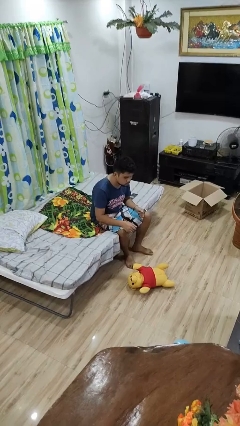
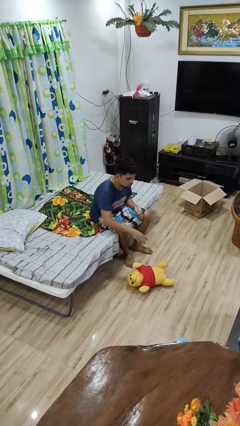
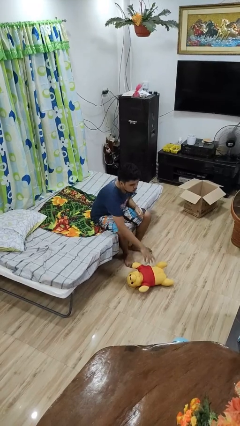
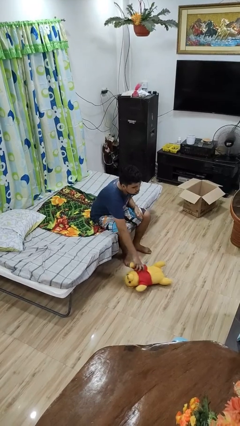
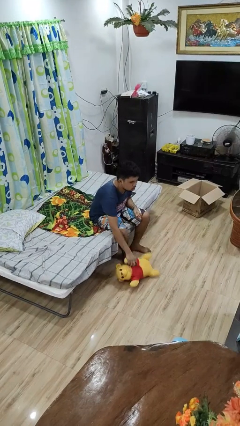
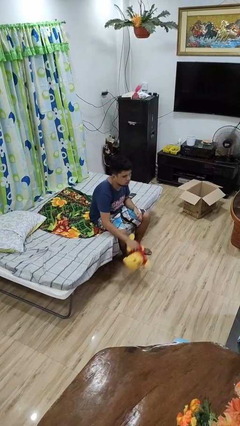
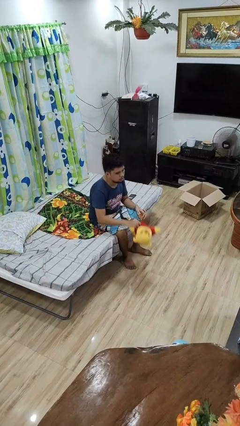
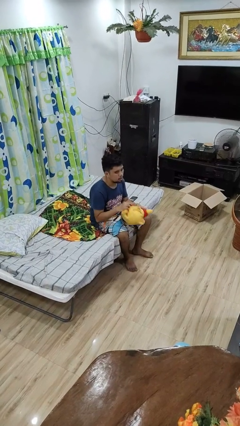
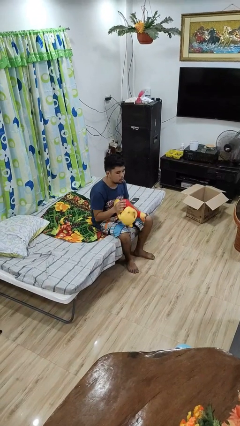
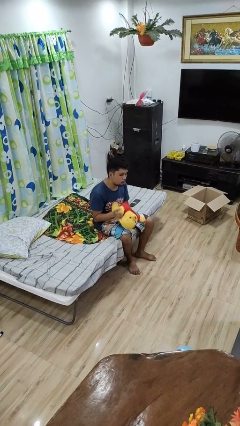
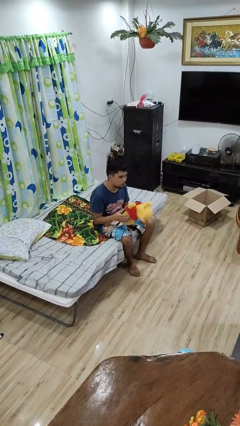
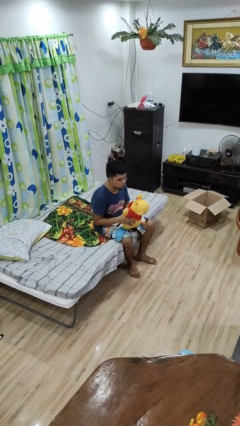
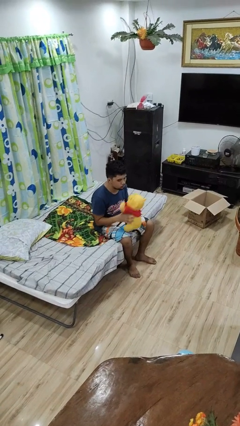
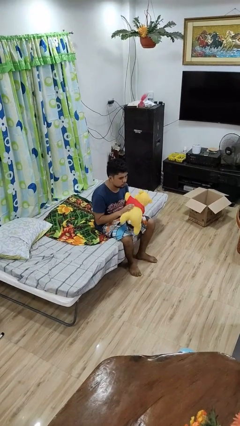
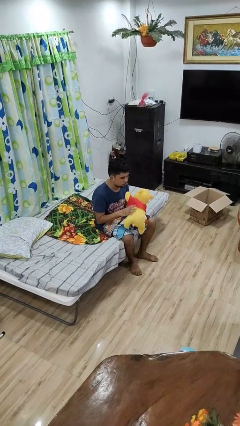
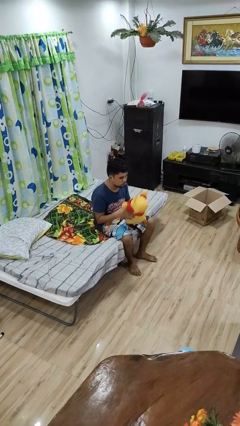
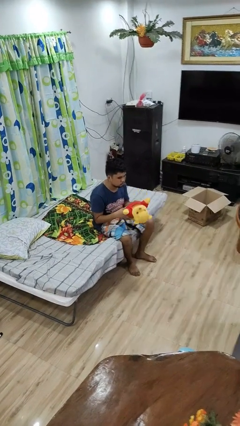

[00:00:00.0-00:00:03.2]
person picks up object from floor

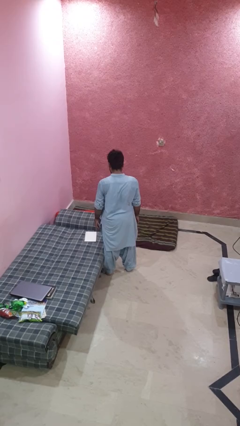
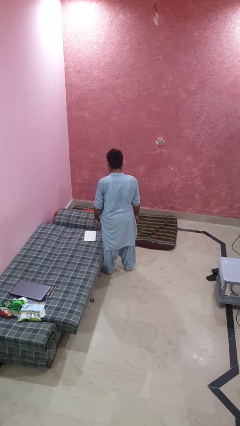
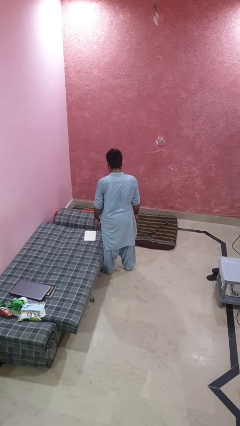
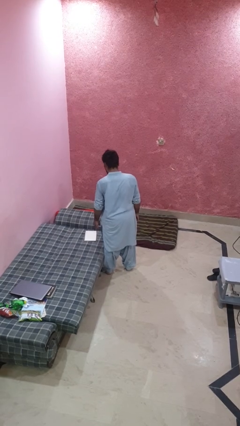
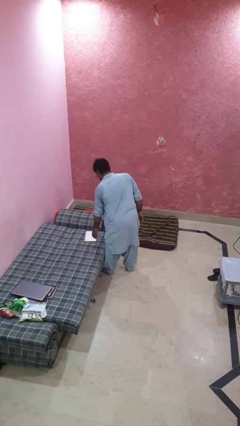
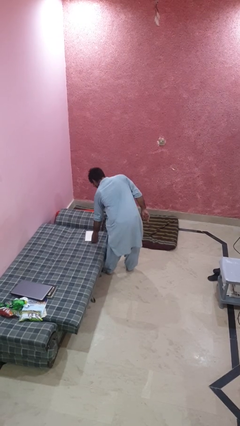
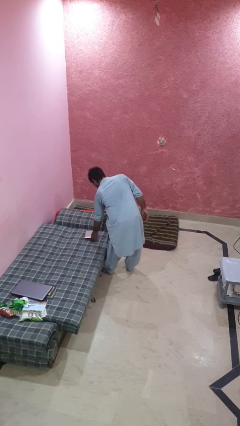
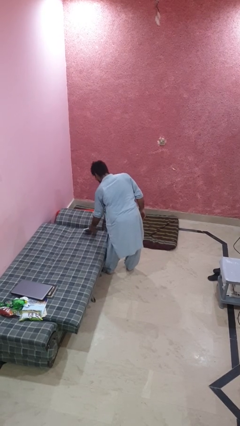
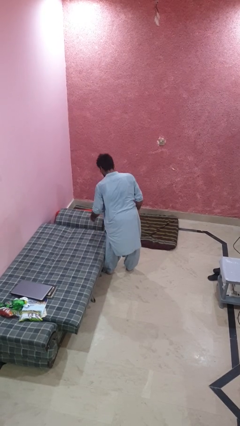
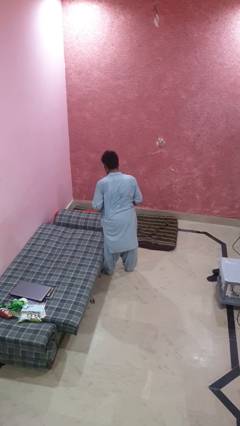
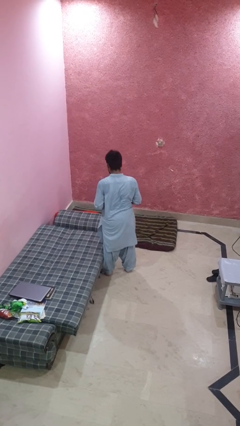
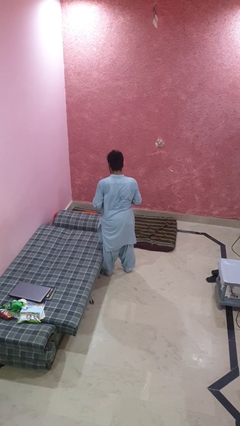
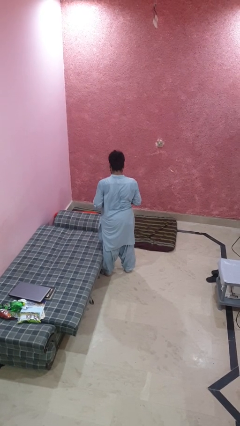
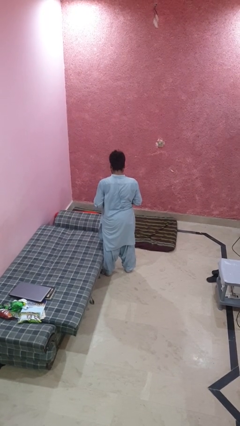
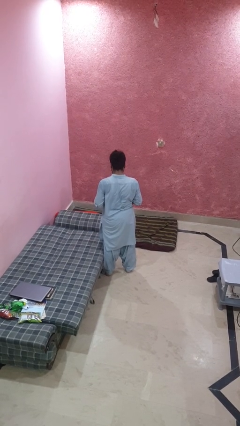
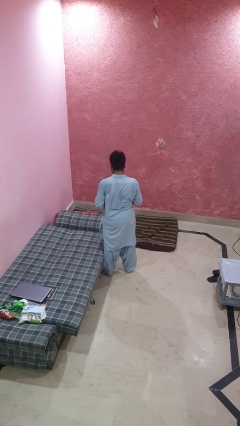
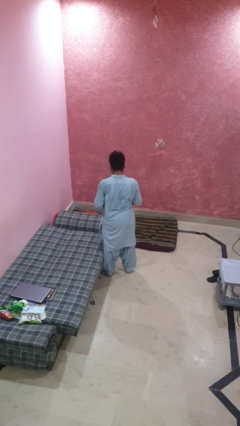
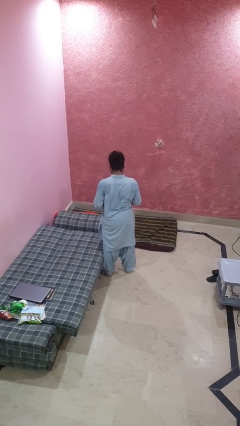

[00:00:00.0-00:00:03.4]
person picks up object from bed

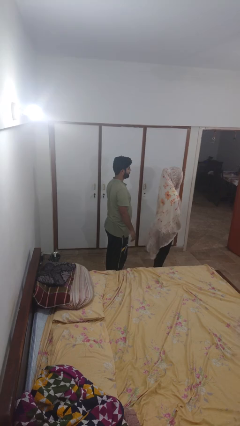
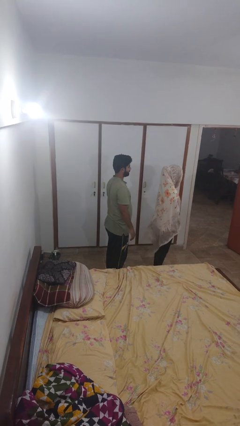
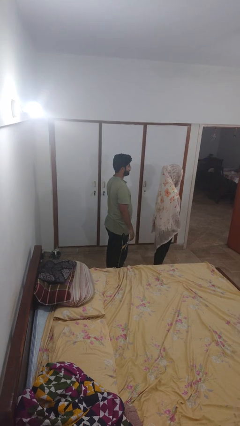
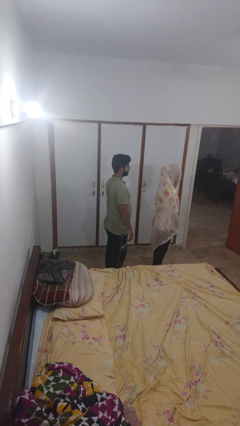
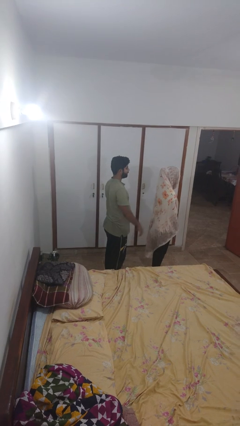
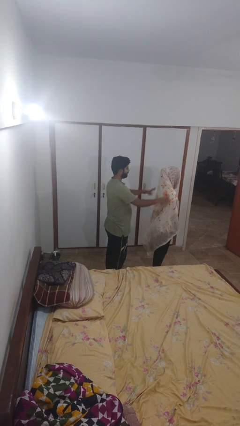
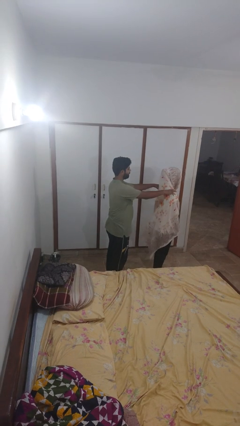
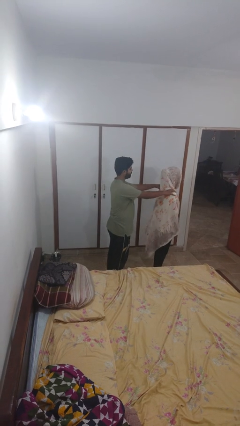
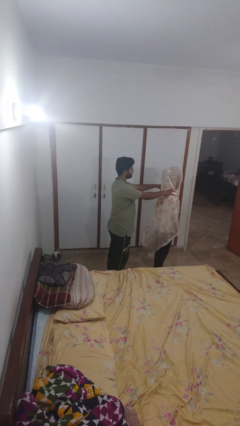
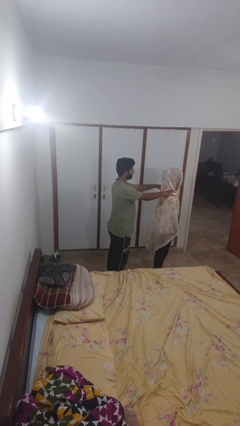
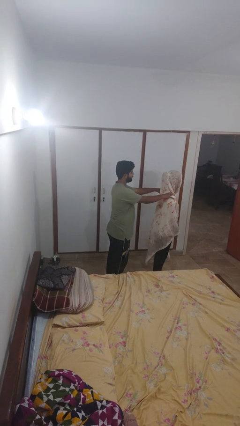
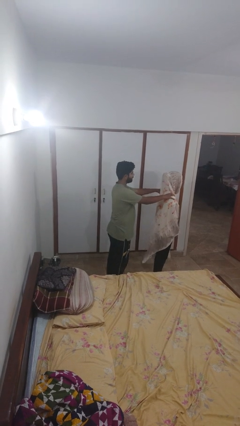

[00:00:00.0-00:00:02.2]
person grabs person by shoulder

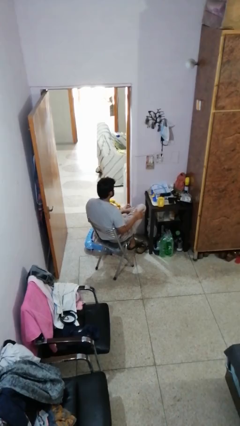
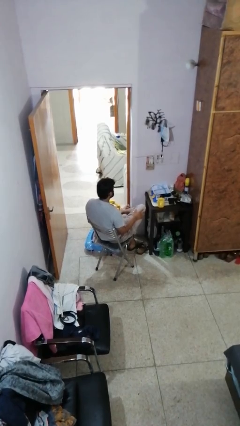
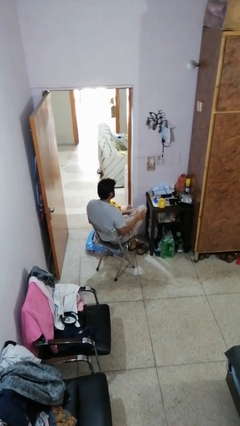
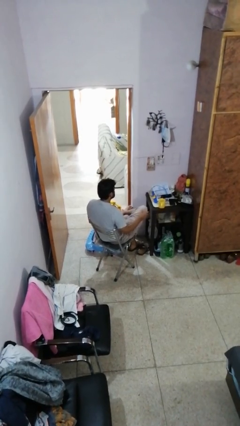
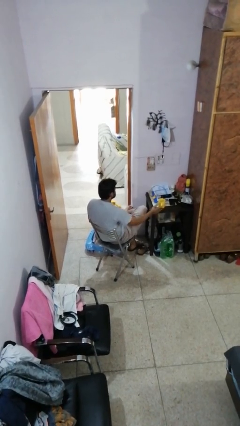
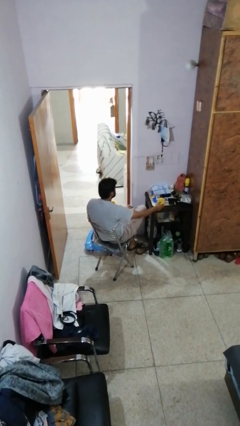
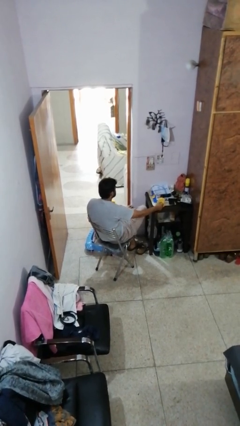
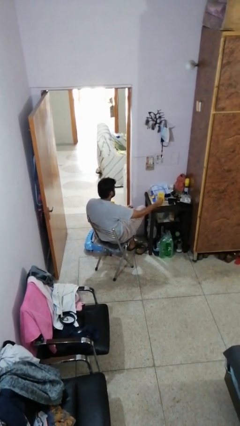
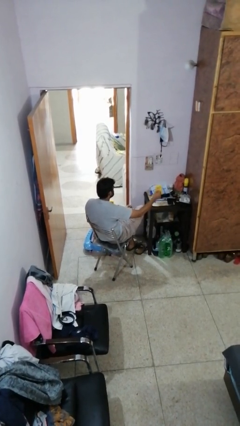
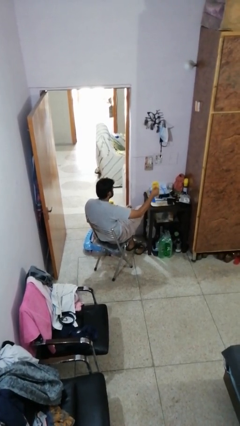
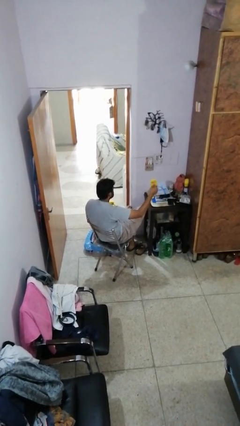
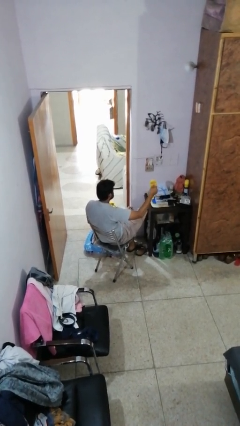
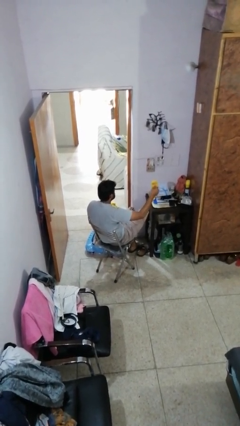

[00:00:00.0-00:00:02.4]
person picks up object from table

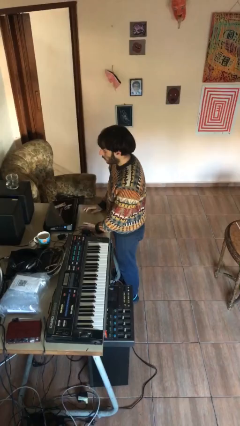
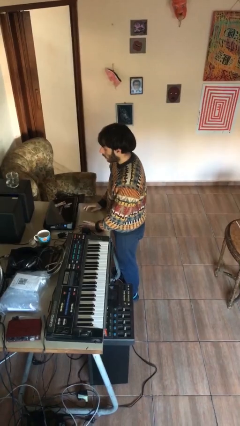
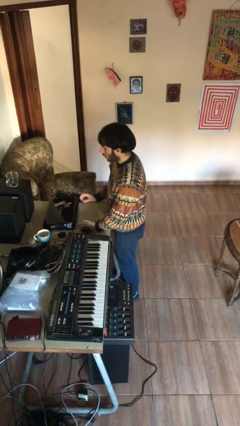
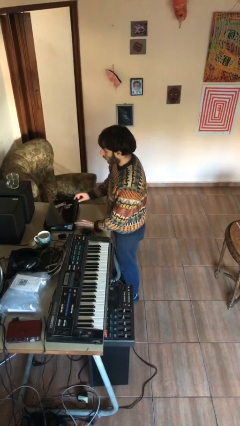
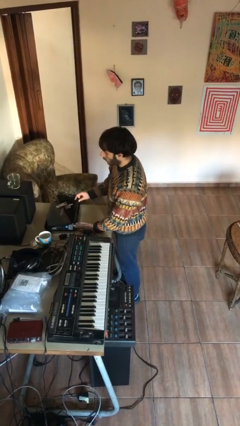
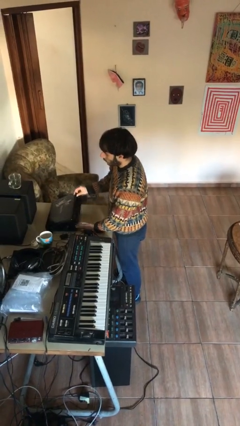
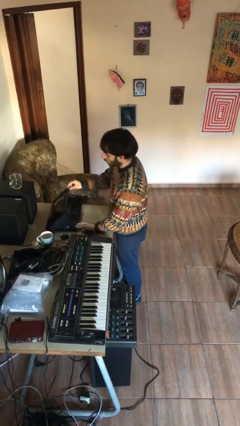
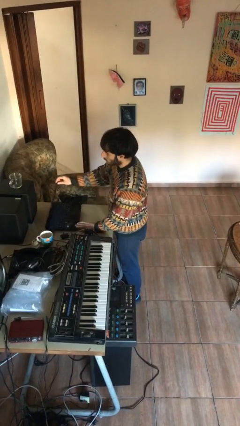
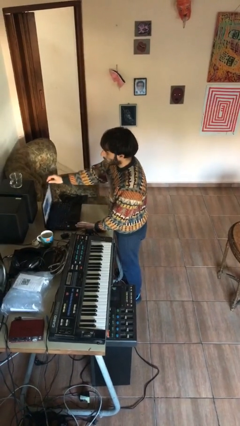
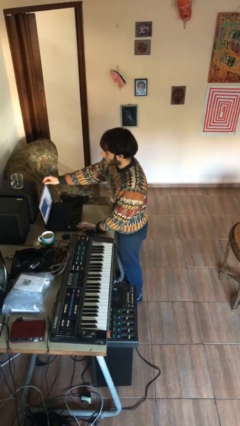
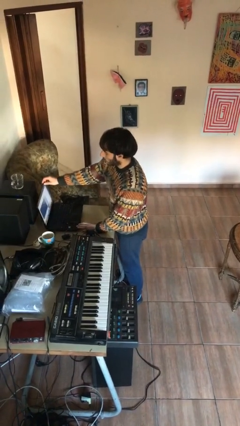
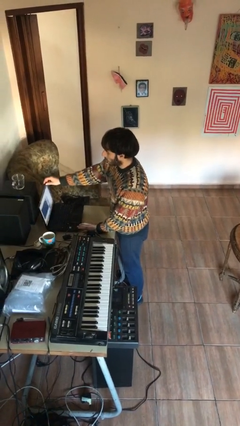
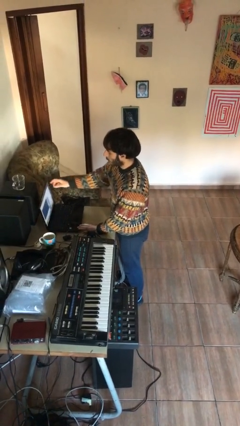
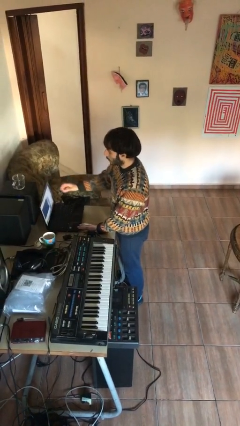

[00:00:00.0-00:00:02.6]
person opens laptop

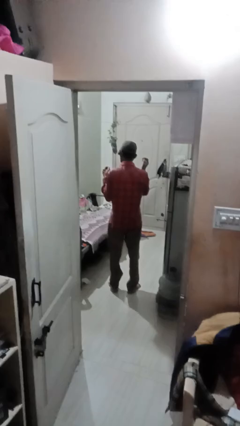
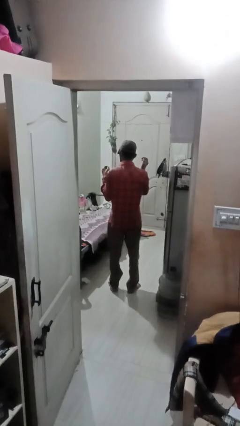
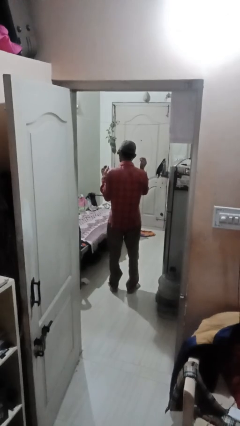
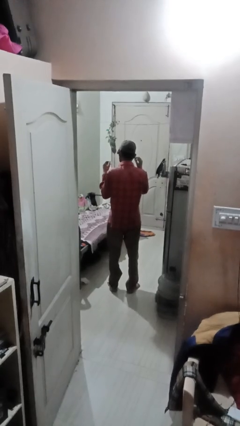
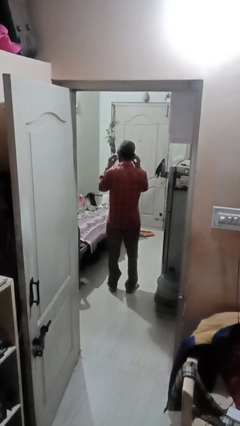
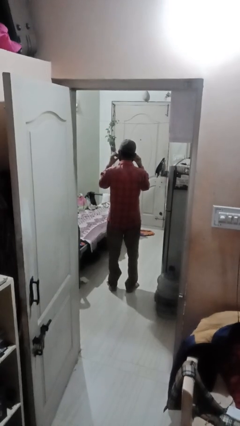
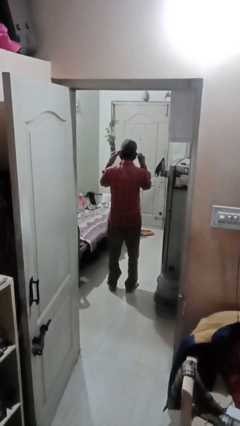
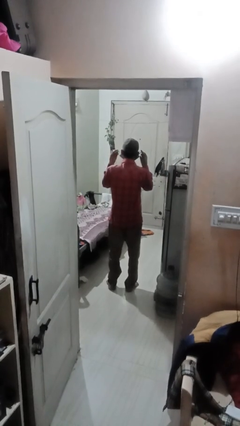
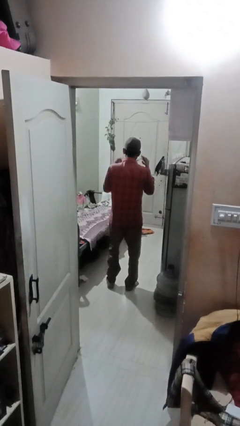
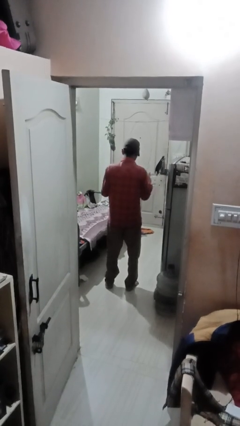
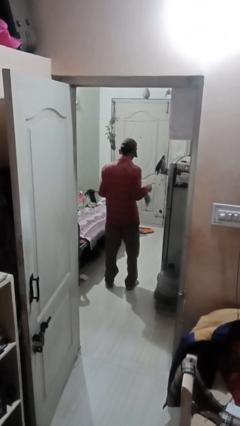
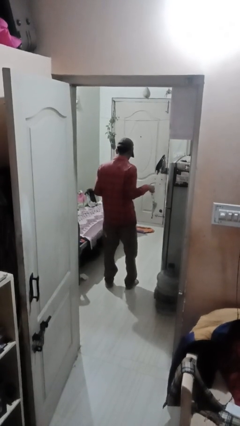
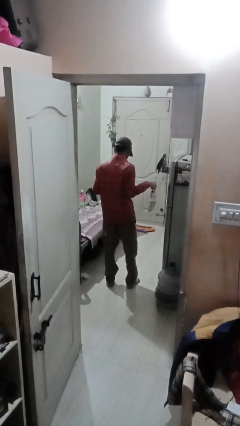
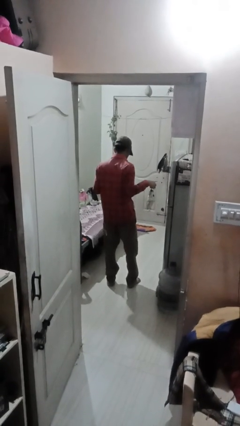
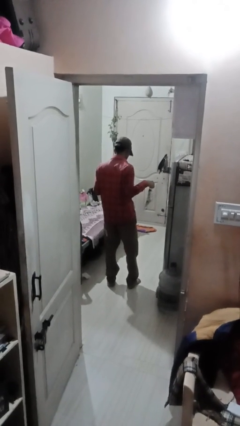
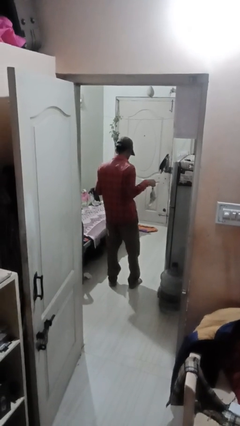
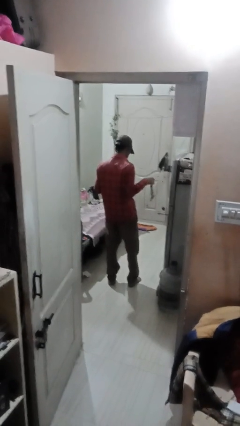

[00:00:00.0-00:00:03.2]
person takes off facemask

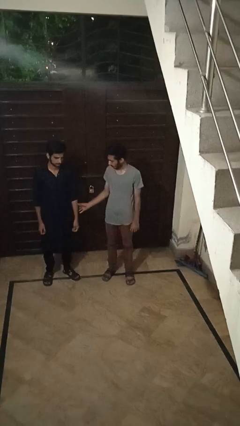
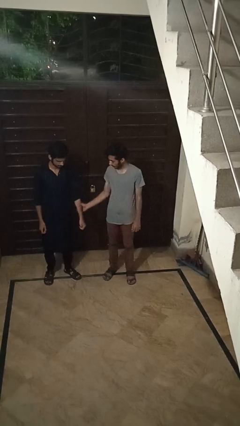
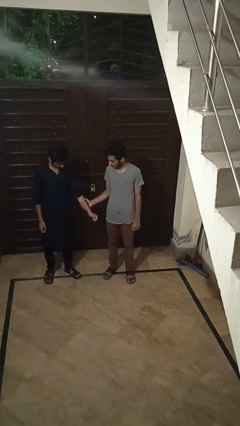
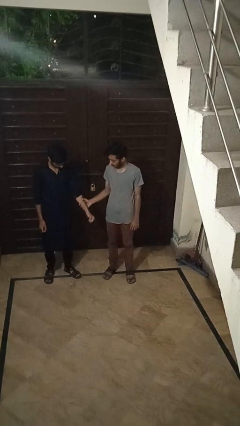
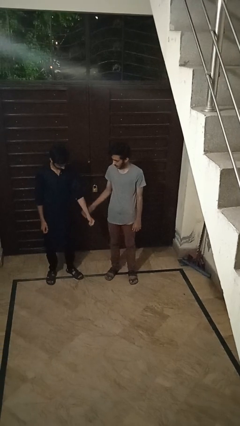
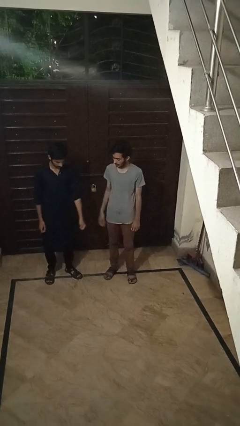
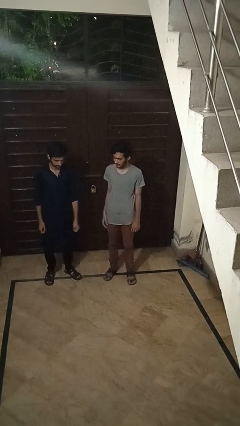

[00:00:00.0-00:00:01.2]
person grabs person by forearm
